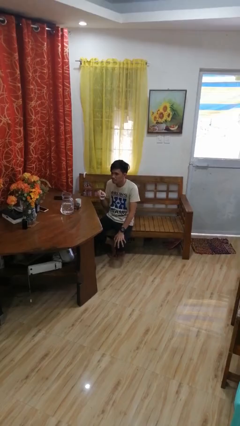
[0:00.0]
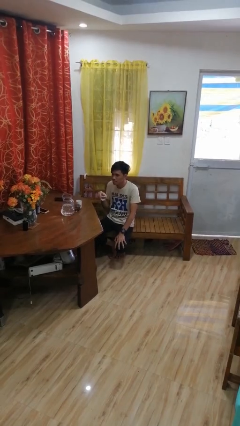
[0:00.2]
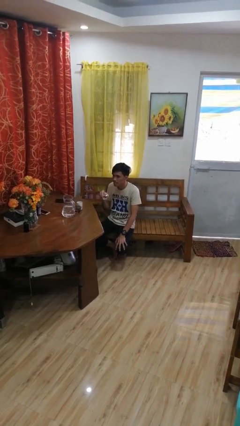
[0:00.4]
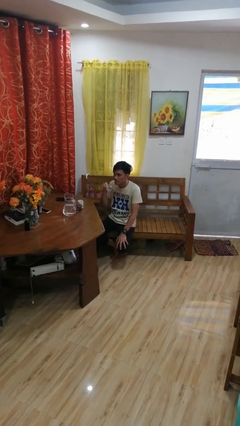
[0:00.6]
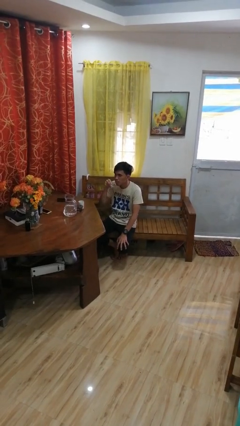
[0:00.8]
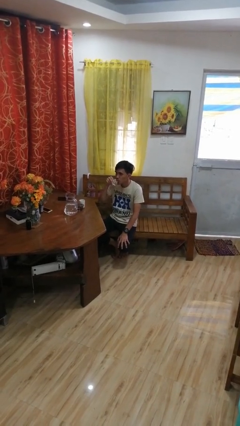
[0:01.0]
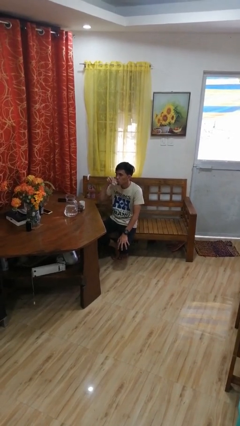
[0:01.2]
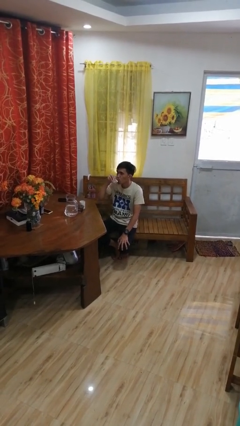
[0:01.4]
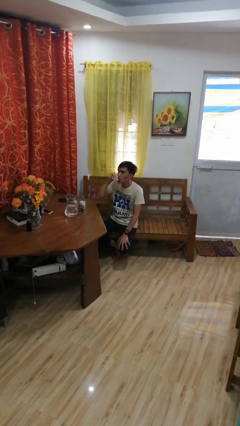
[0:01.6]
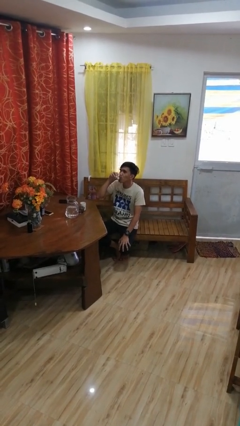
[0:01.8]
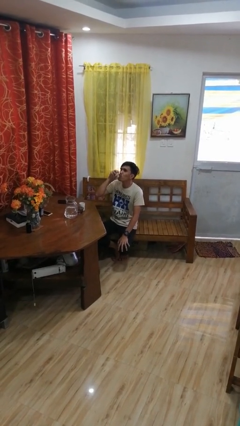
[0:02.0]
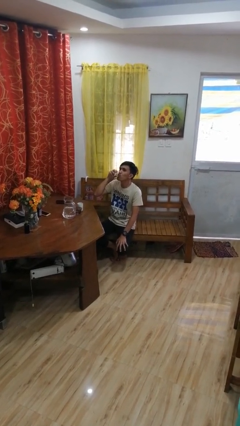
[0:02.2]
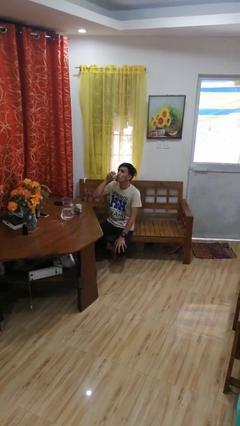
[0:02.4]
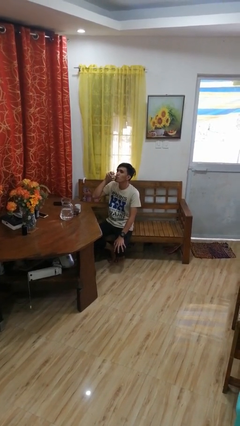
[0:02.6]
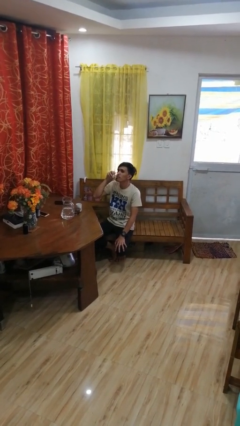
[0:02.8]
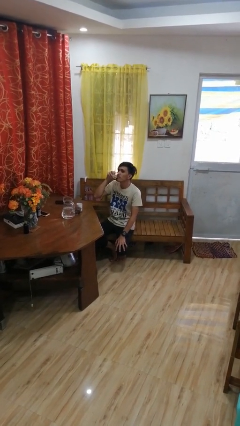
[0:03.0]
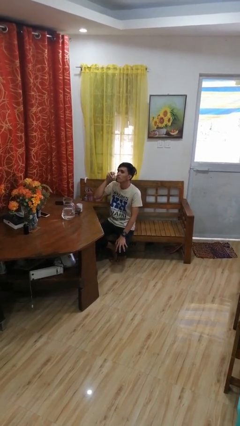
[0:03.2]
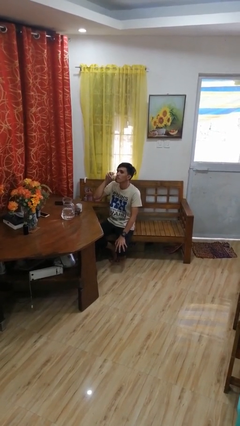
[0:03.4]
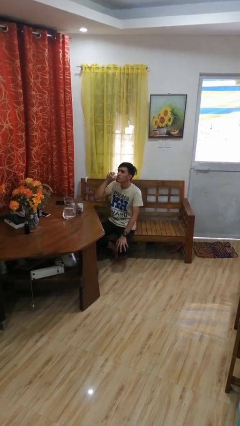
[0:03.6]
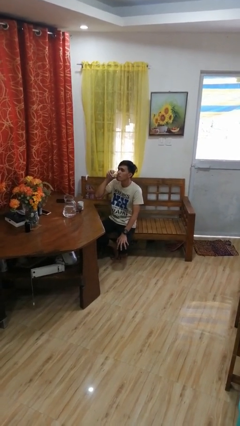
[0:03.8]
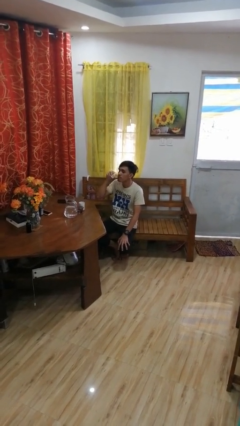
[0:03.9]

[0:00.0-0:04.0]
person drinks from shotglass

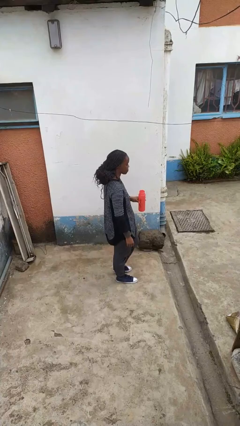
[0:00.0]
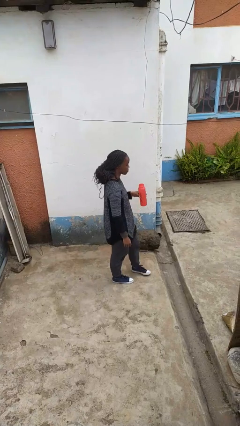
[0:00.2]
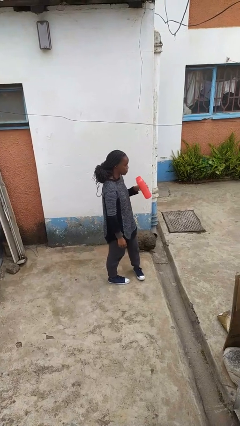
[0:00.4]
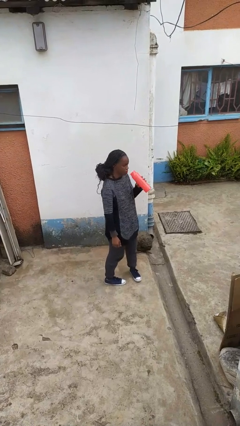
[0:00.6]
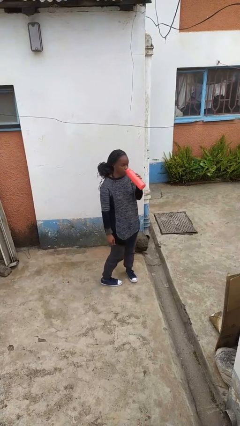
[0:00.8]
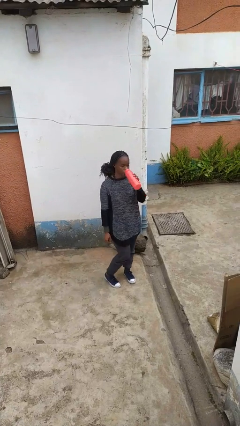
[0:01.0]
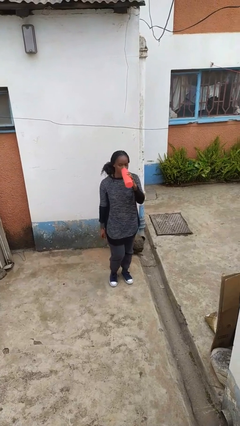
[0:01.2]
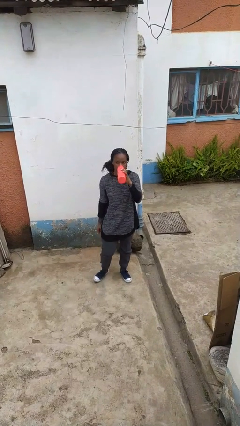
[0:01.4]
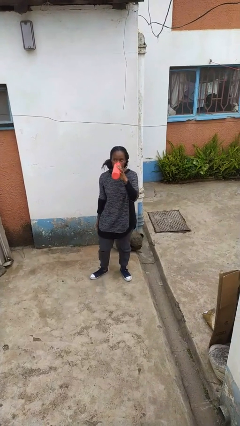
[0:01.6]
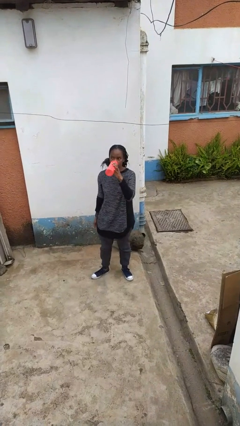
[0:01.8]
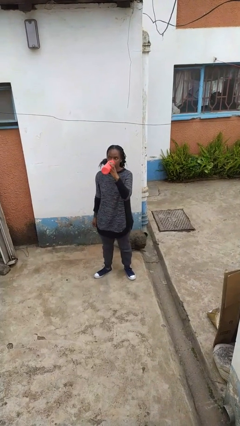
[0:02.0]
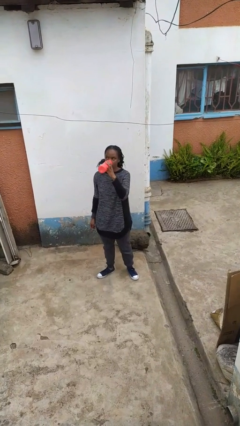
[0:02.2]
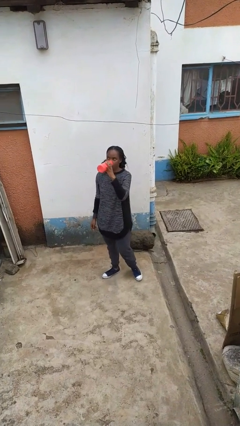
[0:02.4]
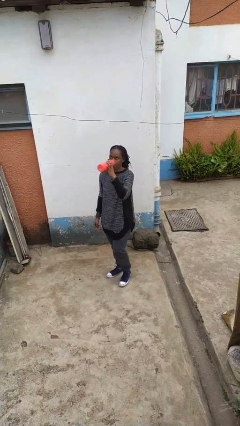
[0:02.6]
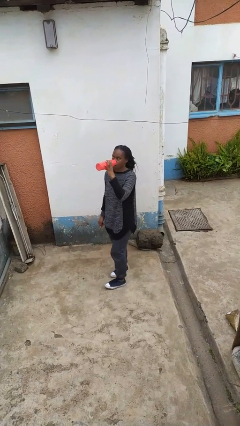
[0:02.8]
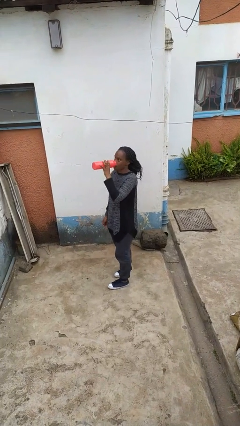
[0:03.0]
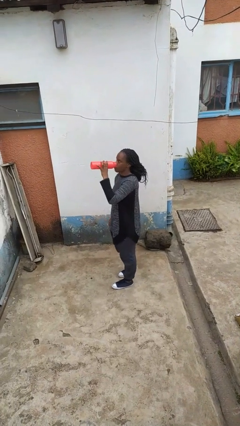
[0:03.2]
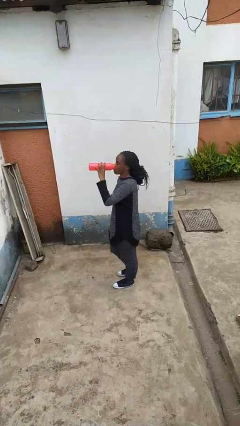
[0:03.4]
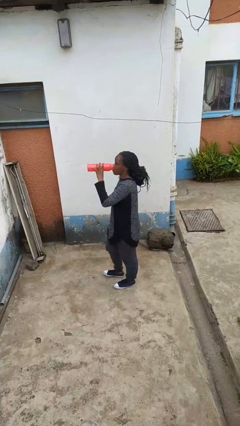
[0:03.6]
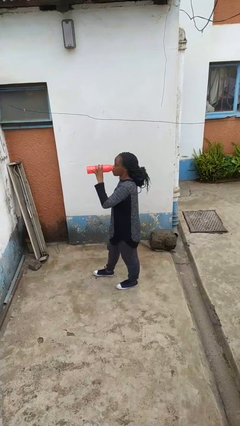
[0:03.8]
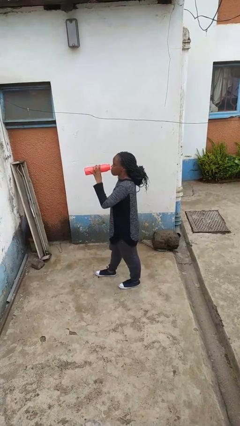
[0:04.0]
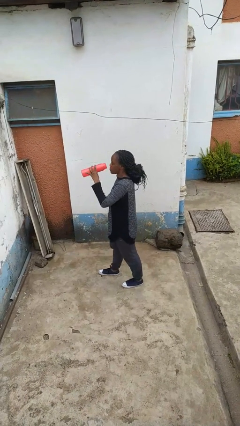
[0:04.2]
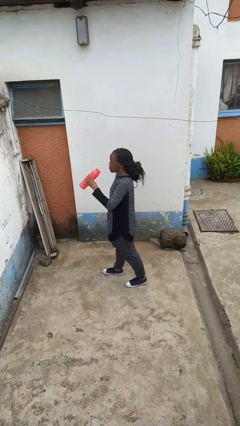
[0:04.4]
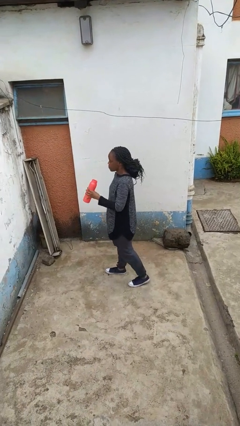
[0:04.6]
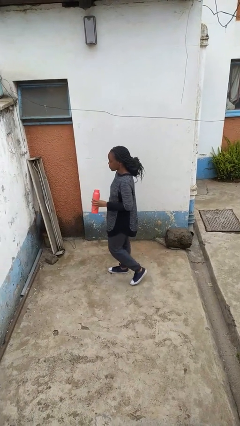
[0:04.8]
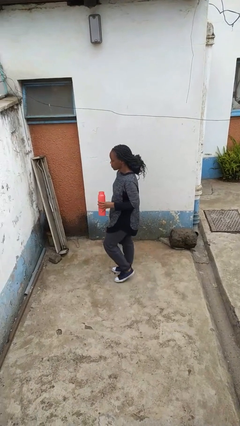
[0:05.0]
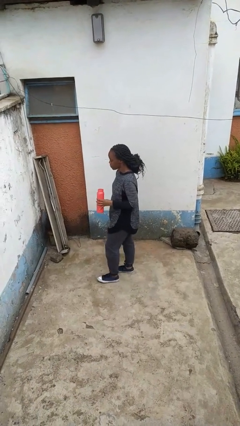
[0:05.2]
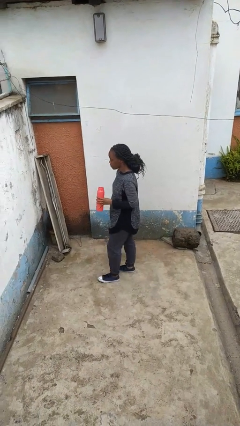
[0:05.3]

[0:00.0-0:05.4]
person drinks from bottle

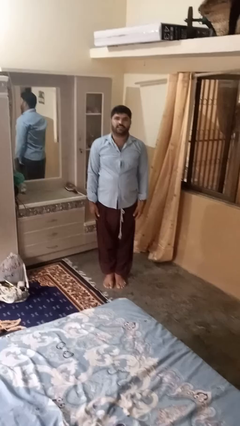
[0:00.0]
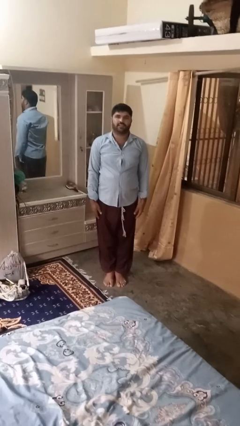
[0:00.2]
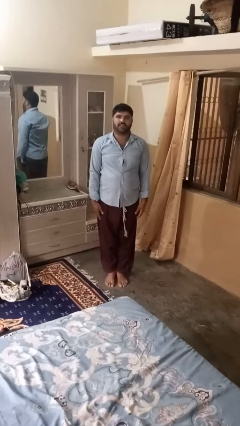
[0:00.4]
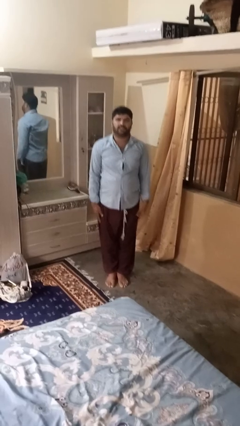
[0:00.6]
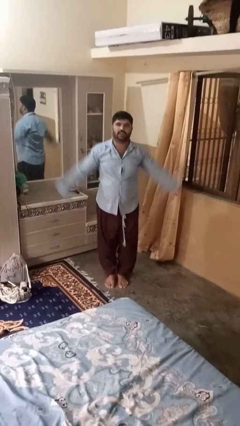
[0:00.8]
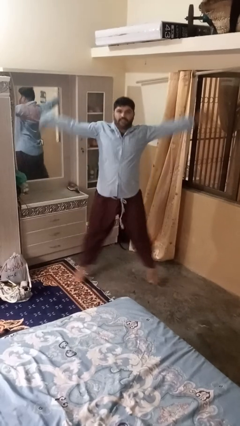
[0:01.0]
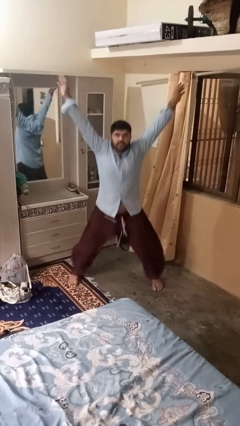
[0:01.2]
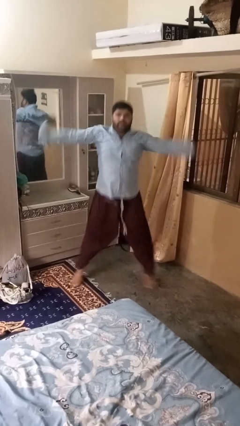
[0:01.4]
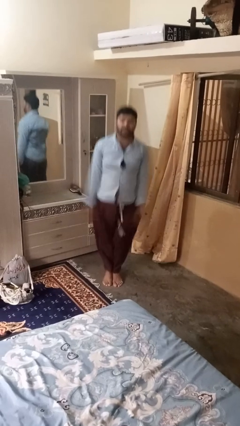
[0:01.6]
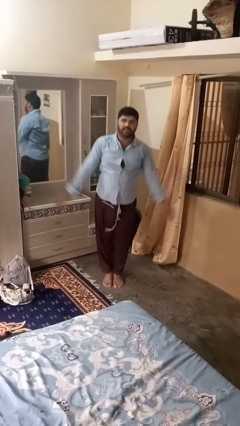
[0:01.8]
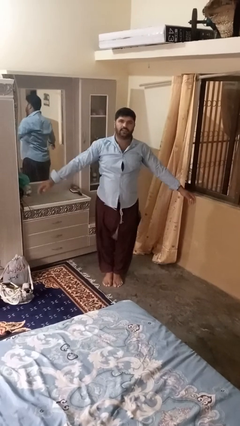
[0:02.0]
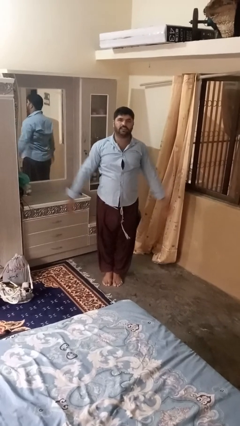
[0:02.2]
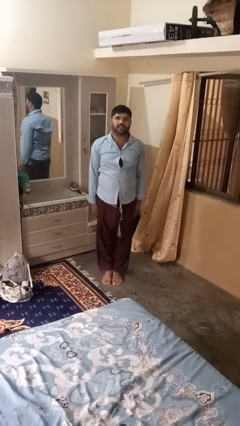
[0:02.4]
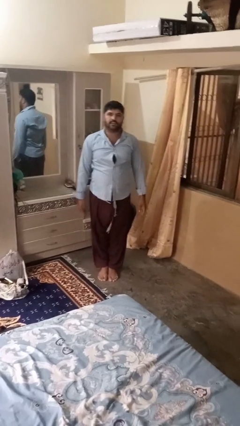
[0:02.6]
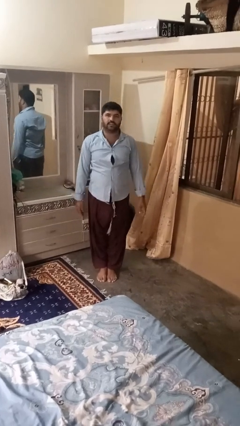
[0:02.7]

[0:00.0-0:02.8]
person exercises with jumping jacks

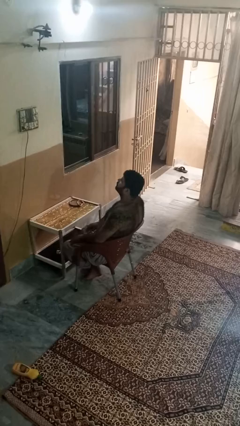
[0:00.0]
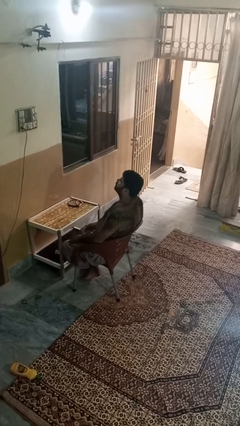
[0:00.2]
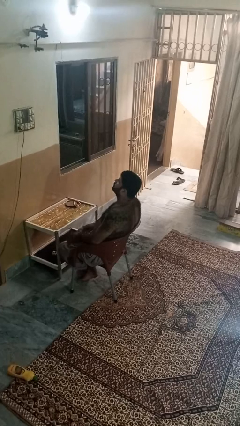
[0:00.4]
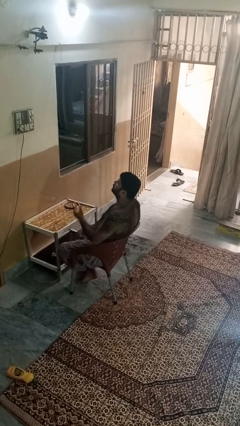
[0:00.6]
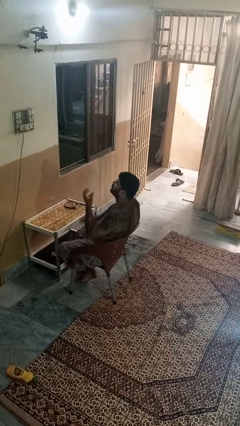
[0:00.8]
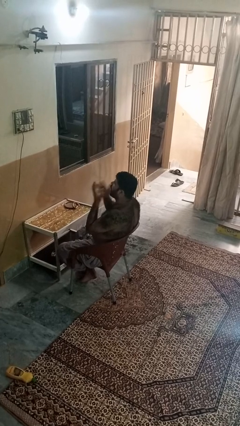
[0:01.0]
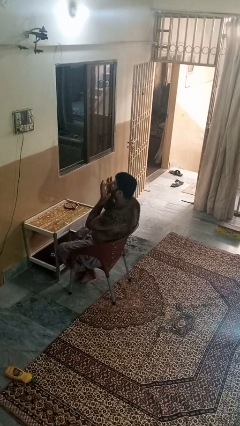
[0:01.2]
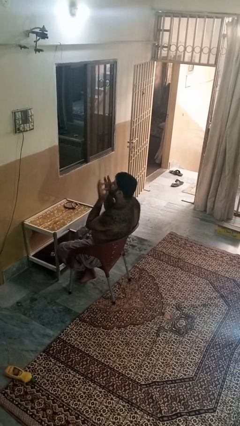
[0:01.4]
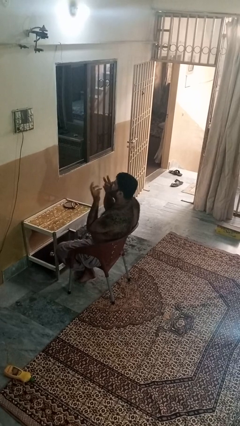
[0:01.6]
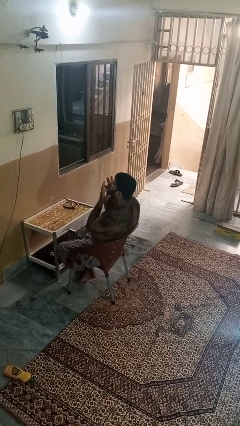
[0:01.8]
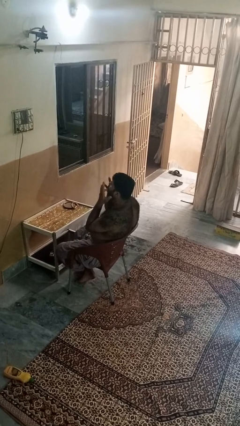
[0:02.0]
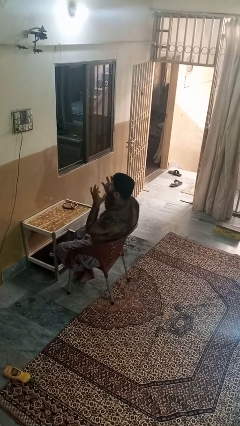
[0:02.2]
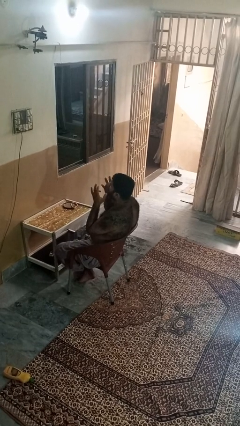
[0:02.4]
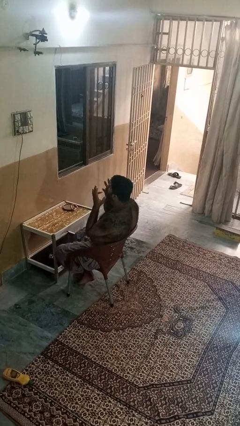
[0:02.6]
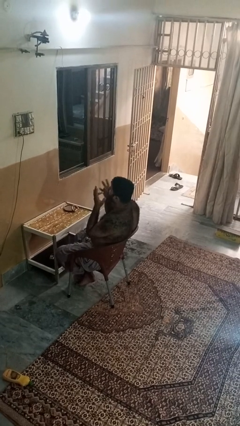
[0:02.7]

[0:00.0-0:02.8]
person licks fingers

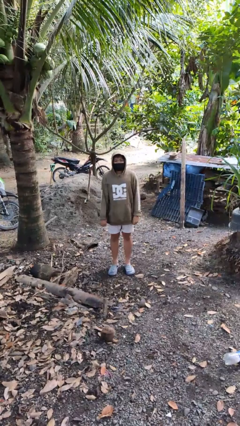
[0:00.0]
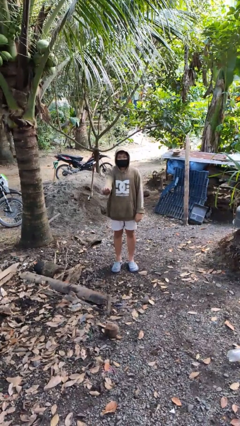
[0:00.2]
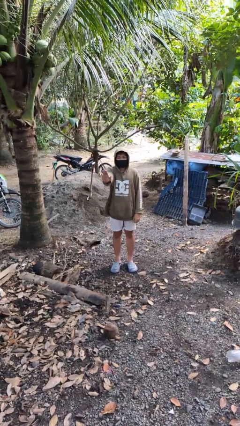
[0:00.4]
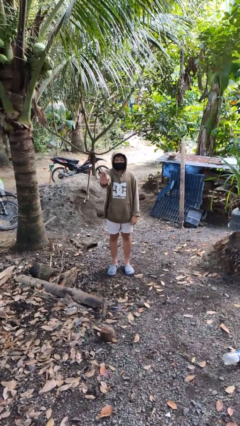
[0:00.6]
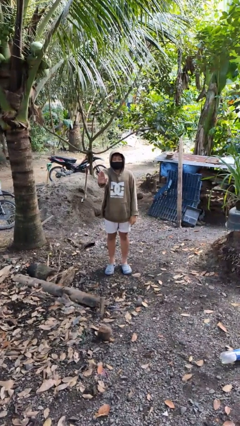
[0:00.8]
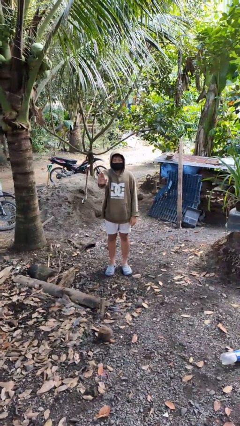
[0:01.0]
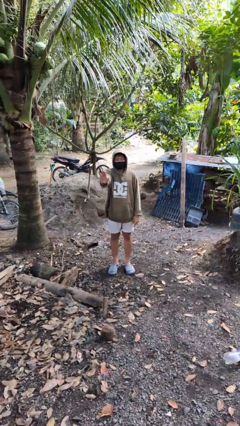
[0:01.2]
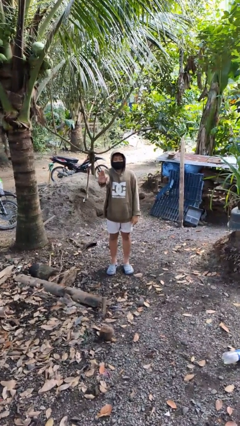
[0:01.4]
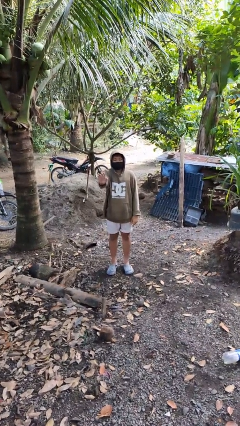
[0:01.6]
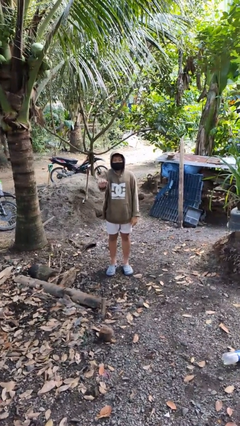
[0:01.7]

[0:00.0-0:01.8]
person gestures stop

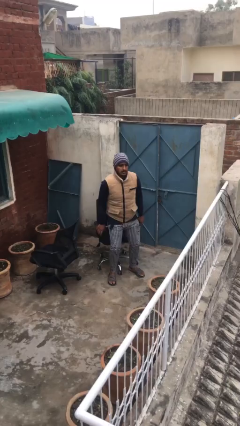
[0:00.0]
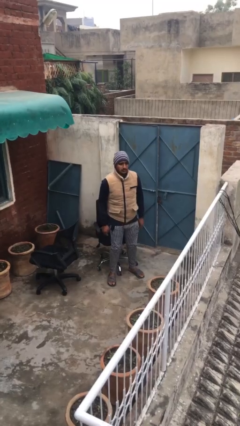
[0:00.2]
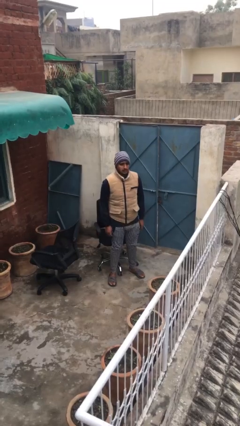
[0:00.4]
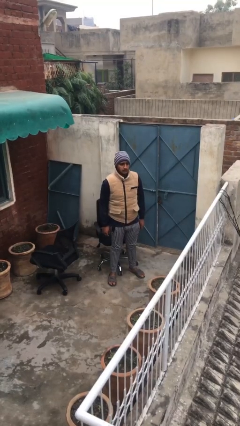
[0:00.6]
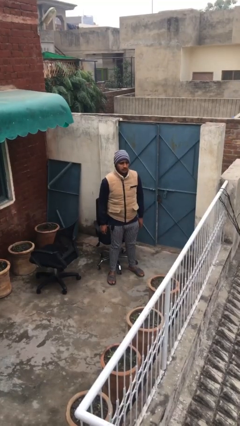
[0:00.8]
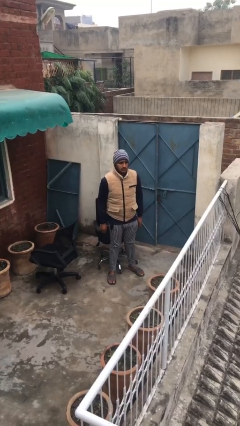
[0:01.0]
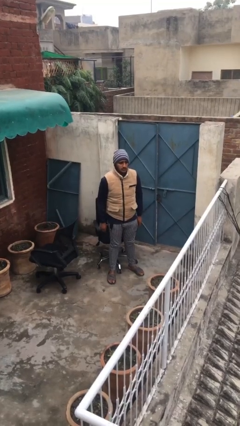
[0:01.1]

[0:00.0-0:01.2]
person stands up
